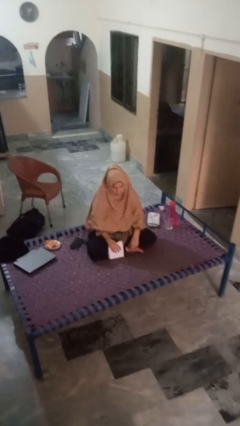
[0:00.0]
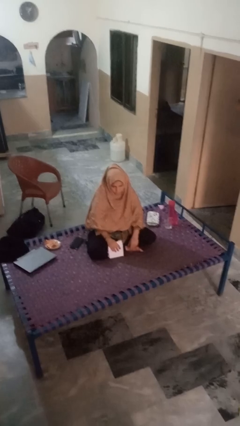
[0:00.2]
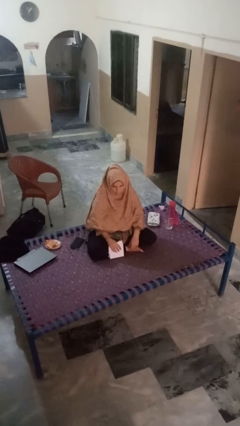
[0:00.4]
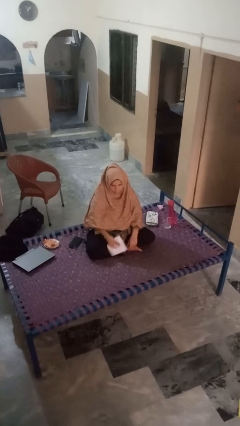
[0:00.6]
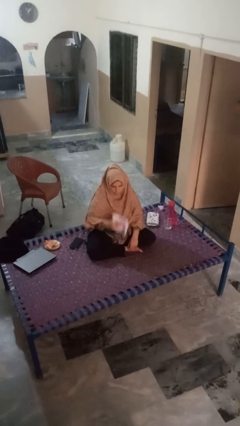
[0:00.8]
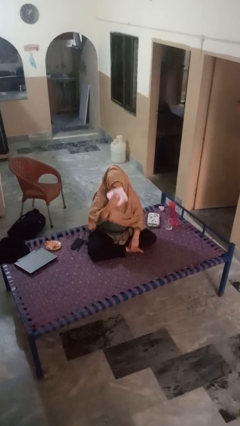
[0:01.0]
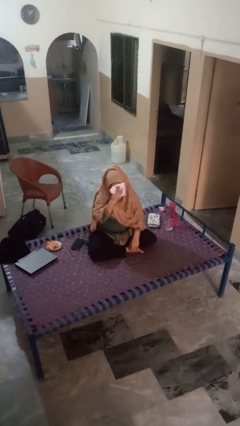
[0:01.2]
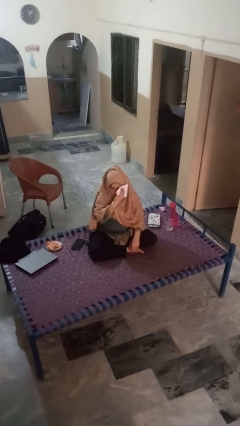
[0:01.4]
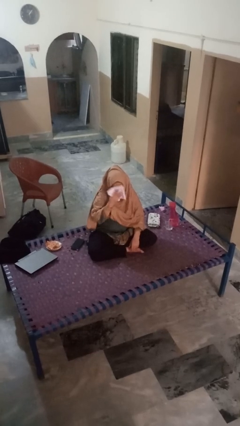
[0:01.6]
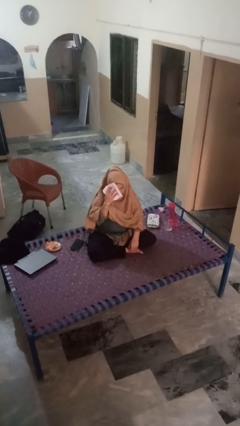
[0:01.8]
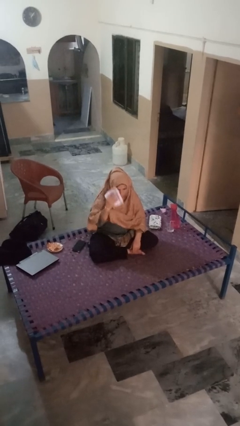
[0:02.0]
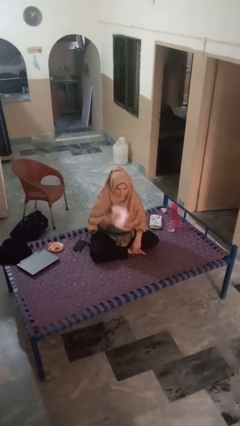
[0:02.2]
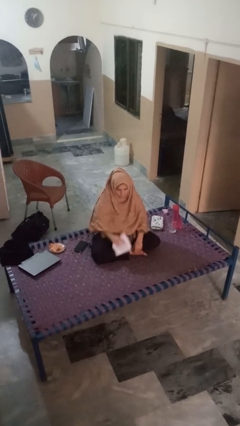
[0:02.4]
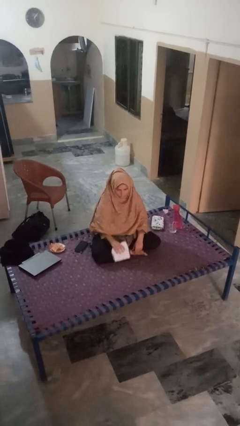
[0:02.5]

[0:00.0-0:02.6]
person wipes mouth with napkin

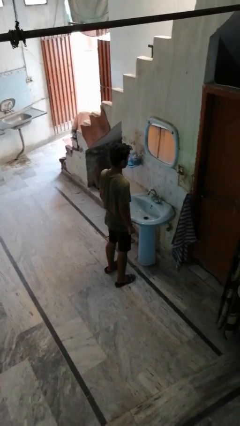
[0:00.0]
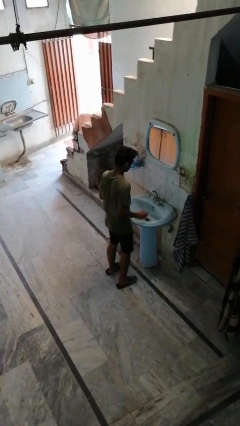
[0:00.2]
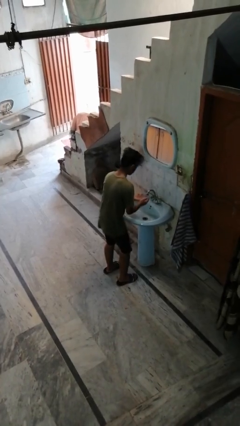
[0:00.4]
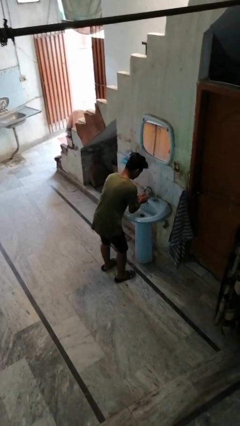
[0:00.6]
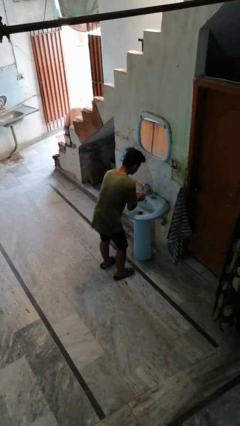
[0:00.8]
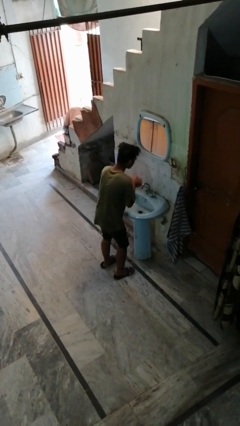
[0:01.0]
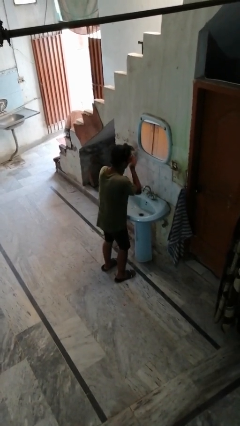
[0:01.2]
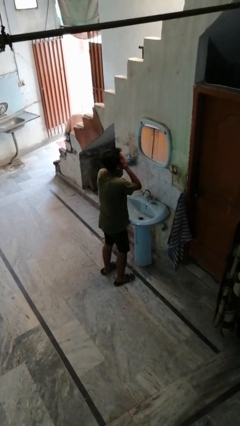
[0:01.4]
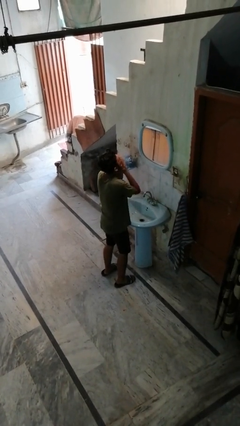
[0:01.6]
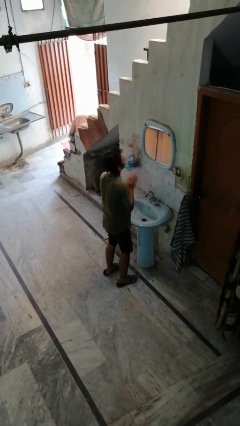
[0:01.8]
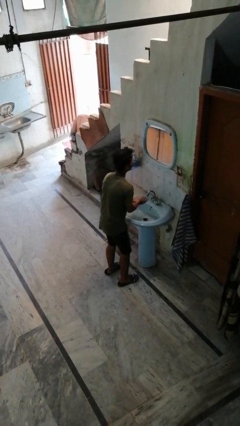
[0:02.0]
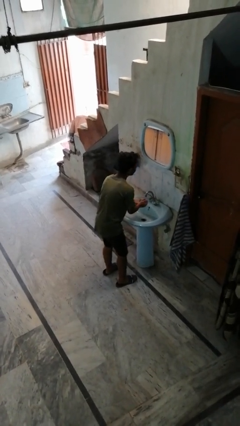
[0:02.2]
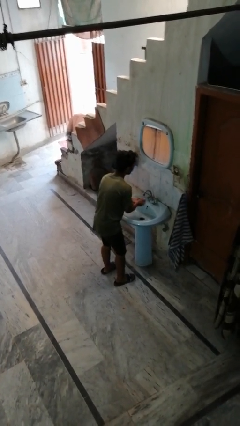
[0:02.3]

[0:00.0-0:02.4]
person washes face

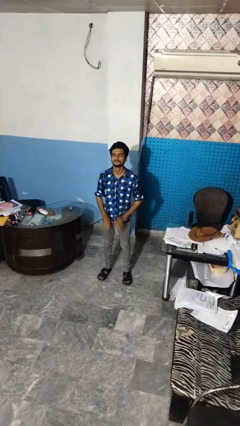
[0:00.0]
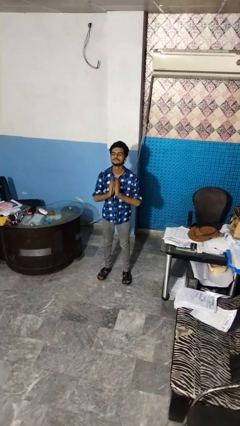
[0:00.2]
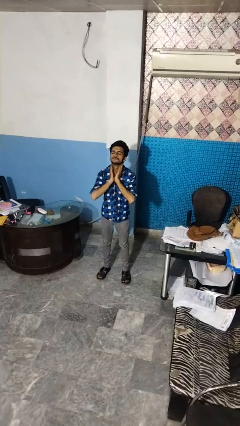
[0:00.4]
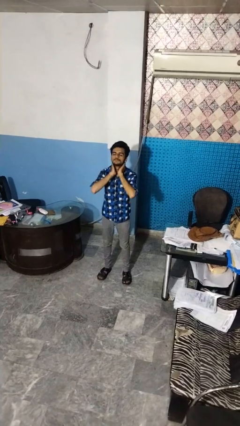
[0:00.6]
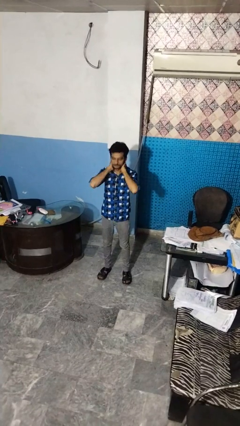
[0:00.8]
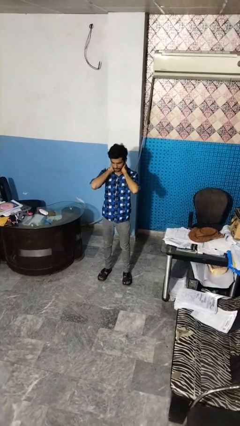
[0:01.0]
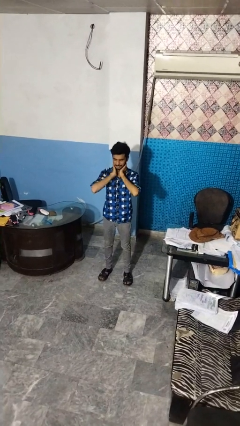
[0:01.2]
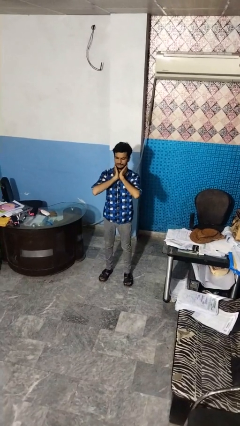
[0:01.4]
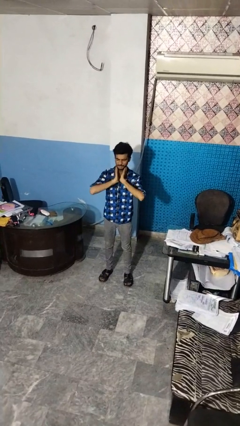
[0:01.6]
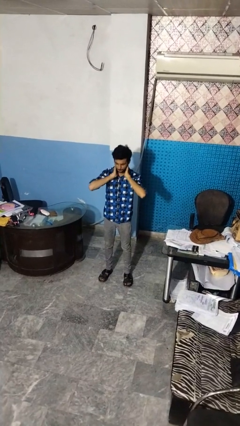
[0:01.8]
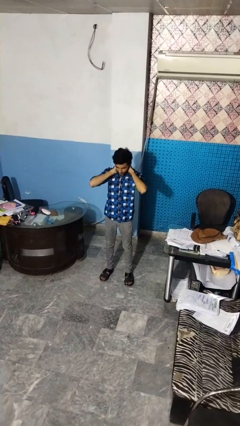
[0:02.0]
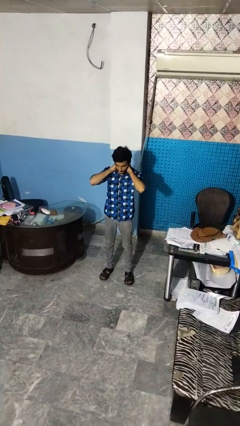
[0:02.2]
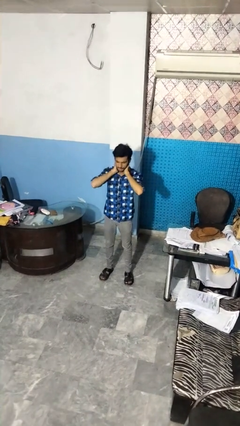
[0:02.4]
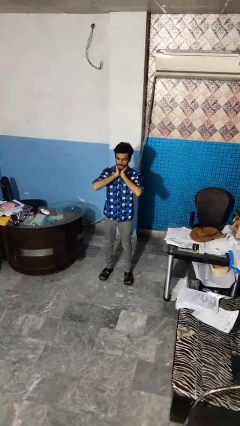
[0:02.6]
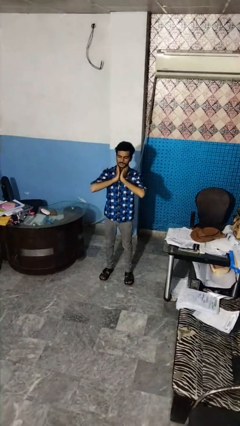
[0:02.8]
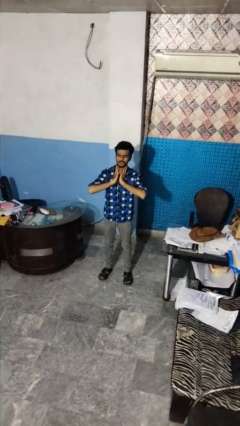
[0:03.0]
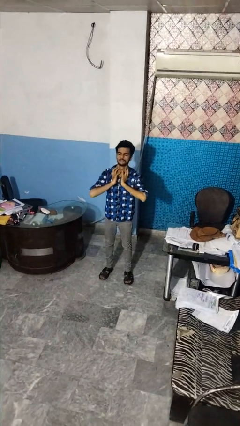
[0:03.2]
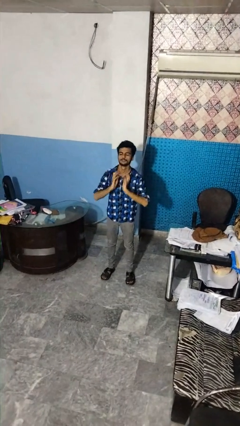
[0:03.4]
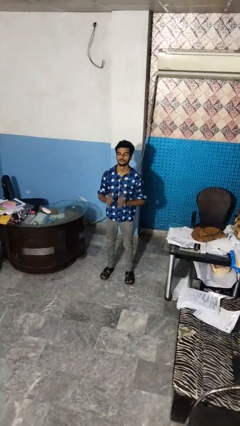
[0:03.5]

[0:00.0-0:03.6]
person rubs neck

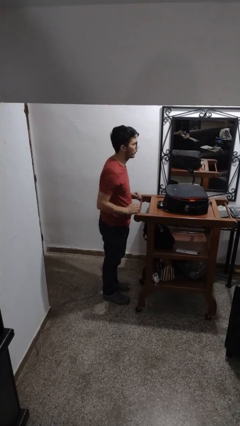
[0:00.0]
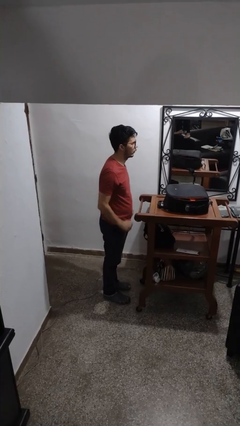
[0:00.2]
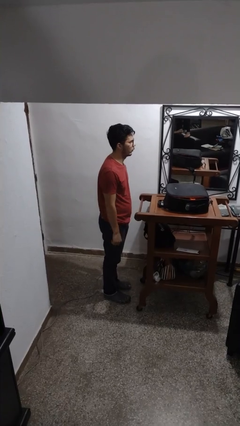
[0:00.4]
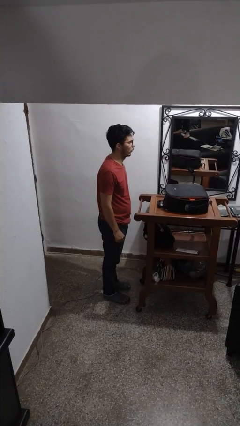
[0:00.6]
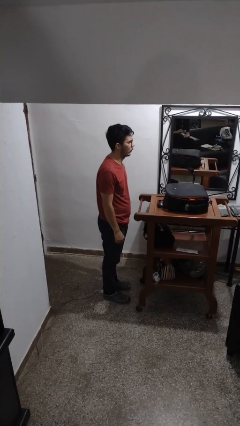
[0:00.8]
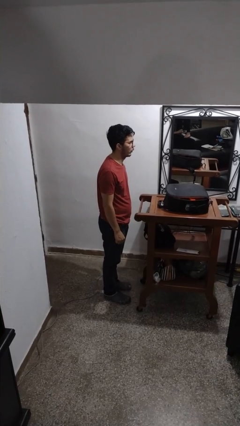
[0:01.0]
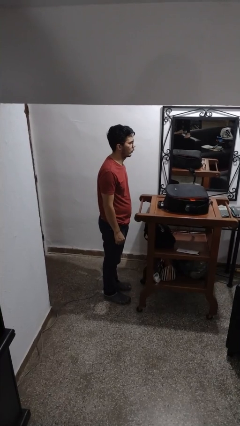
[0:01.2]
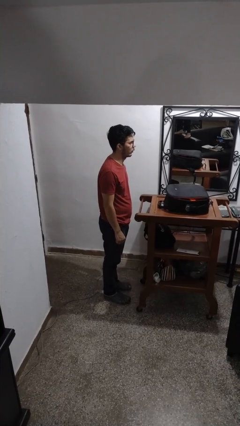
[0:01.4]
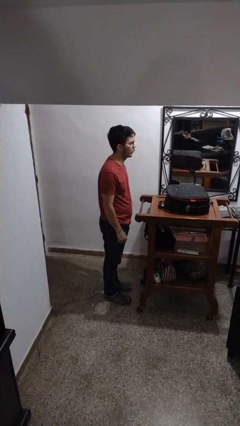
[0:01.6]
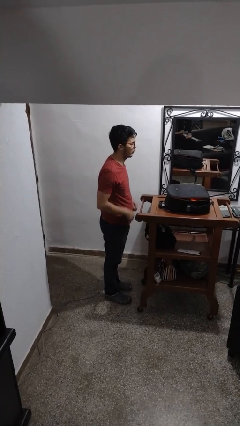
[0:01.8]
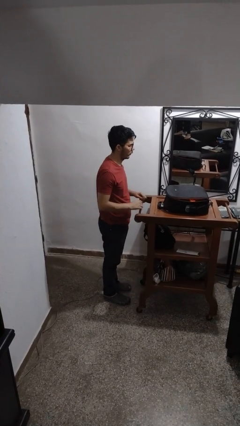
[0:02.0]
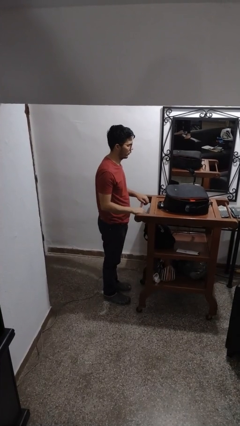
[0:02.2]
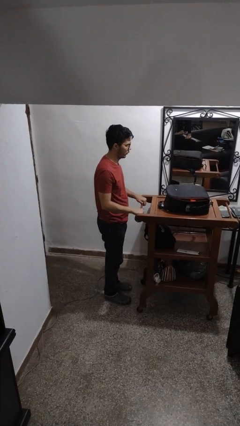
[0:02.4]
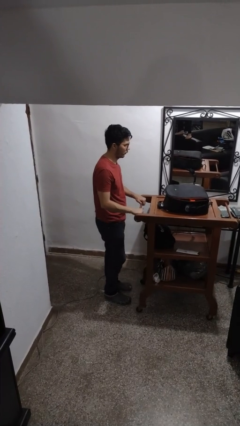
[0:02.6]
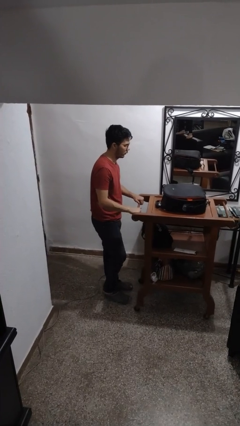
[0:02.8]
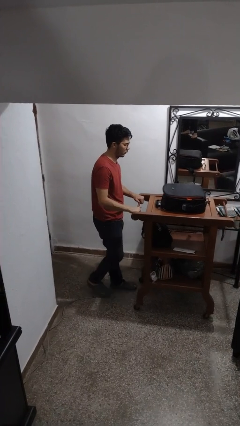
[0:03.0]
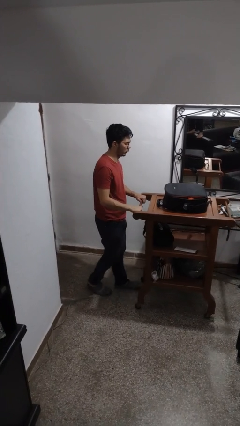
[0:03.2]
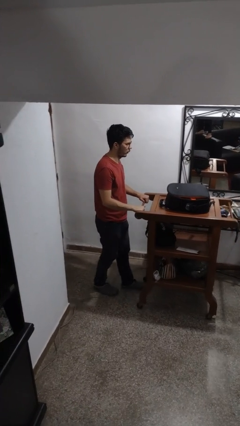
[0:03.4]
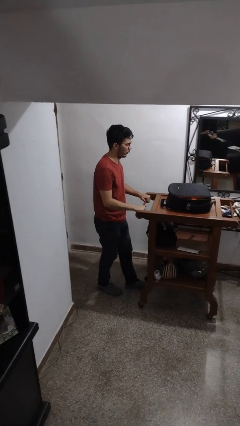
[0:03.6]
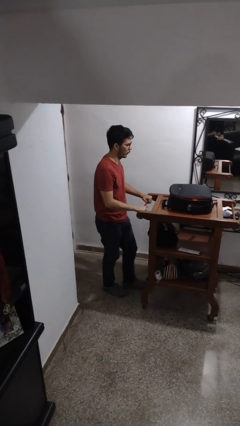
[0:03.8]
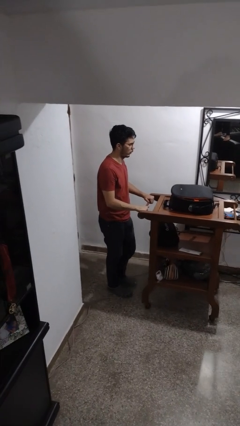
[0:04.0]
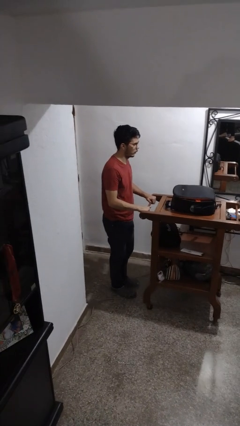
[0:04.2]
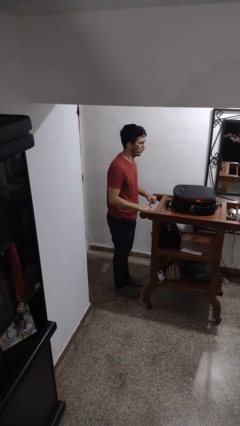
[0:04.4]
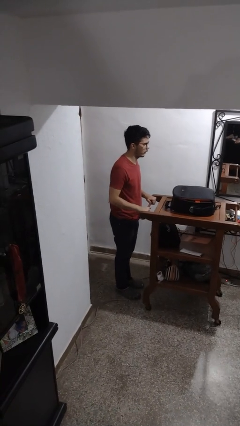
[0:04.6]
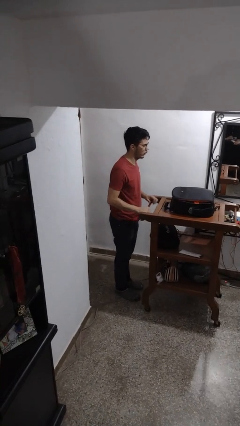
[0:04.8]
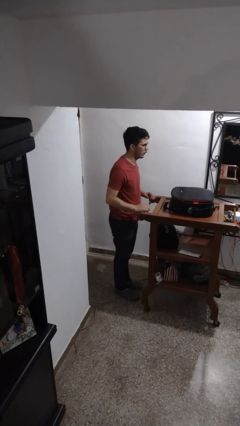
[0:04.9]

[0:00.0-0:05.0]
person pulls wheeled cart

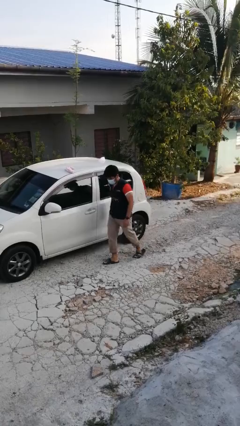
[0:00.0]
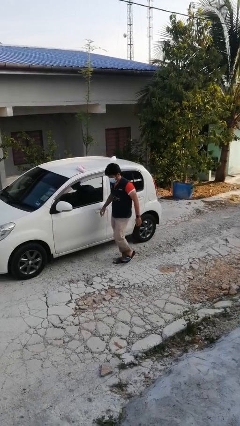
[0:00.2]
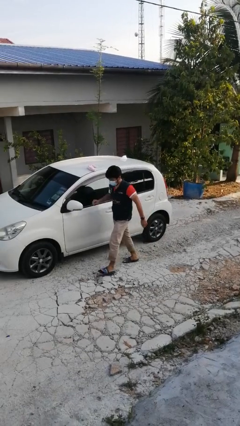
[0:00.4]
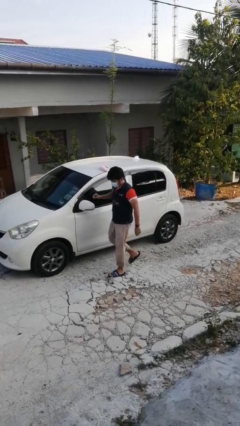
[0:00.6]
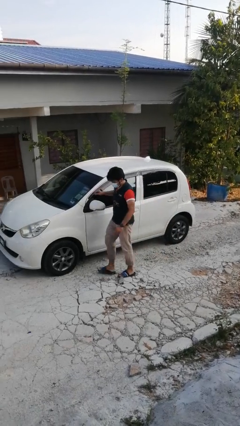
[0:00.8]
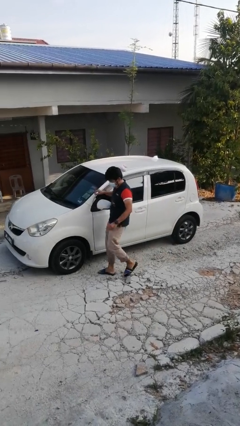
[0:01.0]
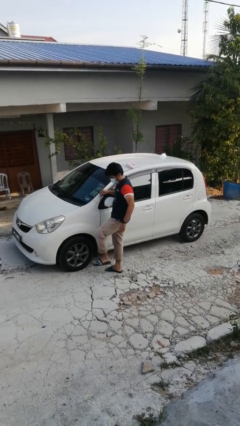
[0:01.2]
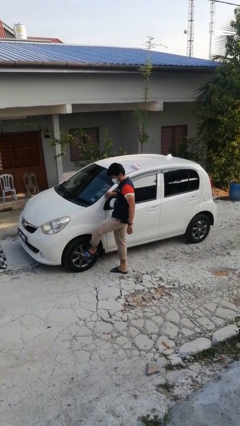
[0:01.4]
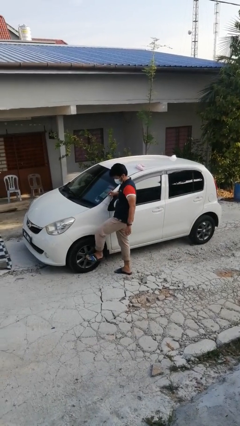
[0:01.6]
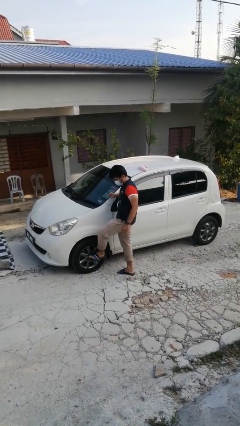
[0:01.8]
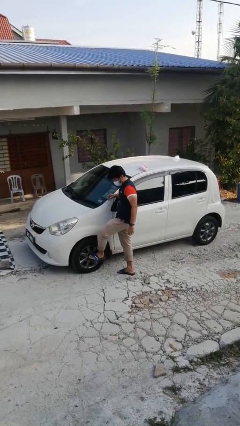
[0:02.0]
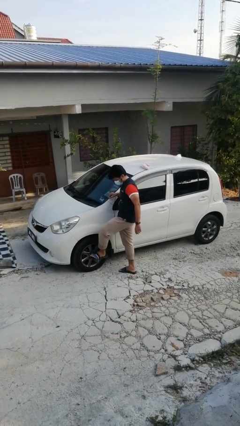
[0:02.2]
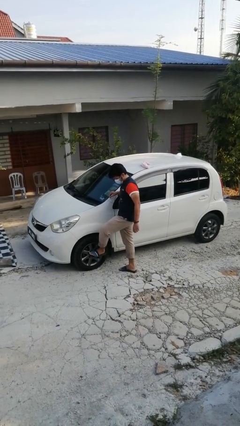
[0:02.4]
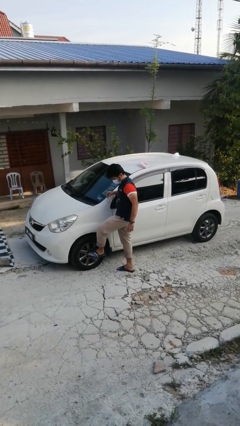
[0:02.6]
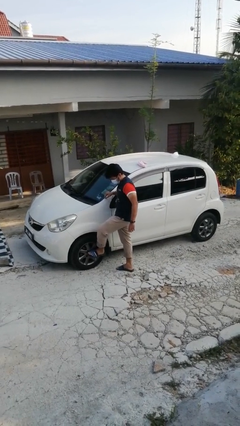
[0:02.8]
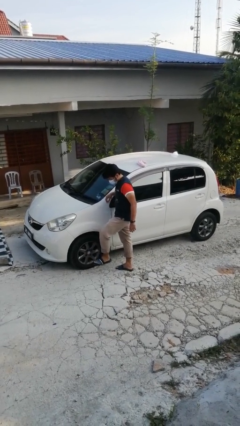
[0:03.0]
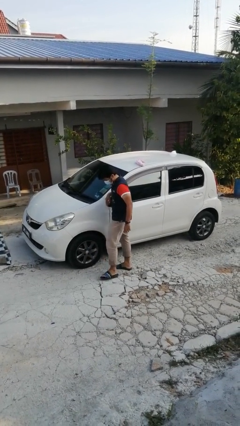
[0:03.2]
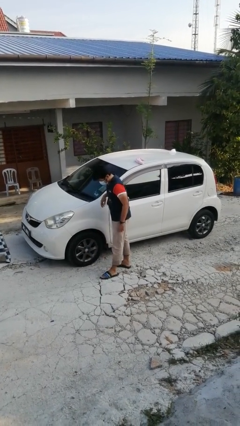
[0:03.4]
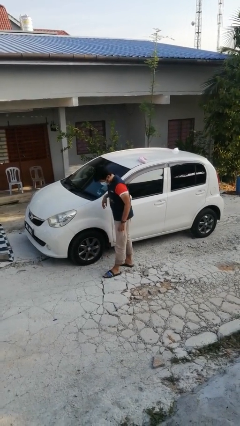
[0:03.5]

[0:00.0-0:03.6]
person kicks car tires
